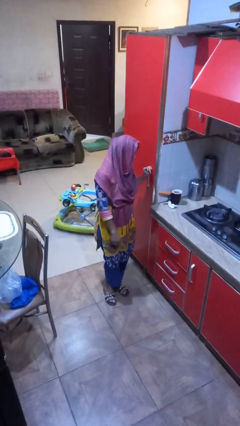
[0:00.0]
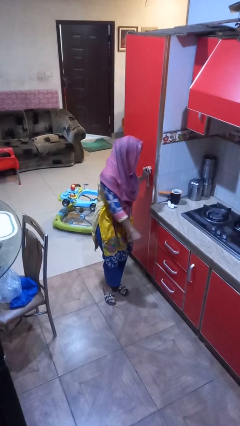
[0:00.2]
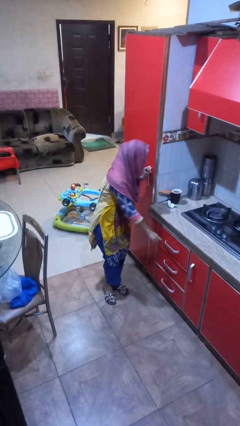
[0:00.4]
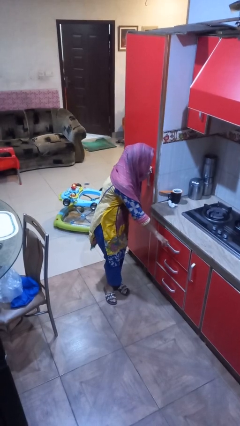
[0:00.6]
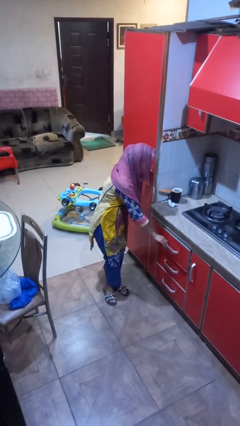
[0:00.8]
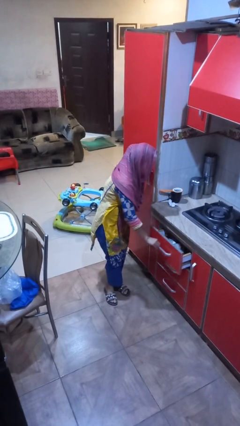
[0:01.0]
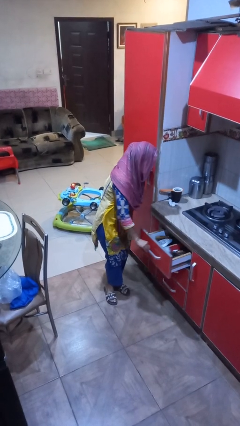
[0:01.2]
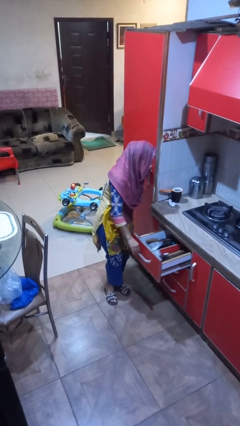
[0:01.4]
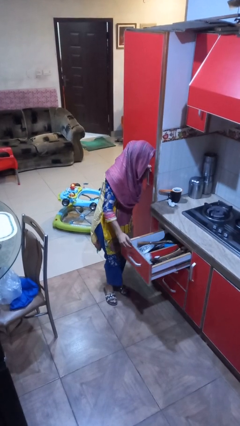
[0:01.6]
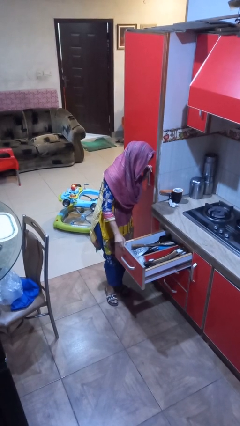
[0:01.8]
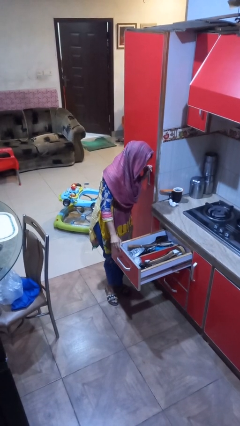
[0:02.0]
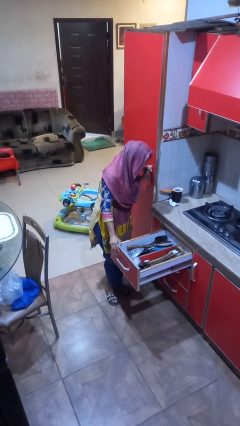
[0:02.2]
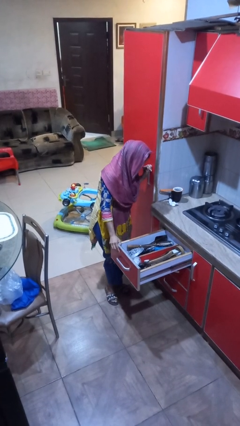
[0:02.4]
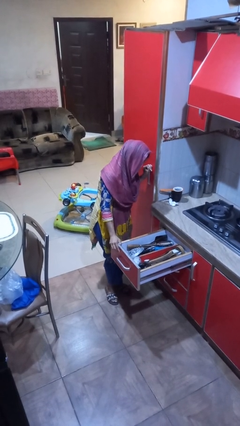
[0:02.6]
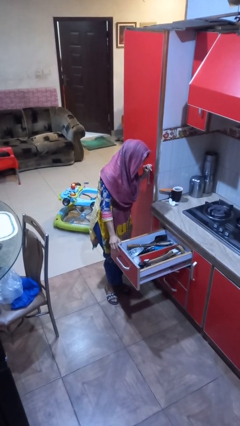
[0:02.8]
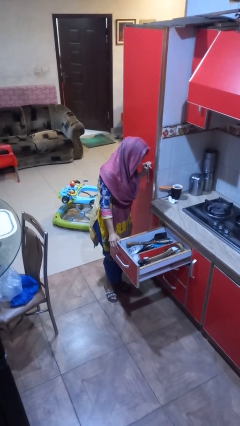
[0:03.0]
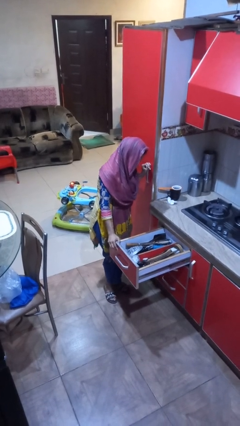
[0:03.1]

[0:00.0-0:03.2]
person opens kitchen drawer

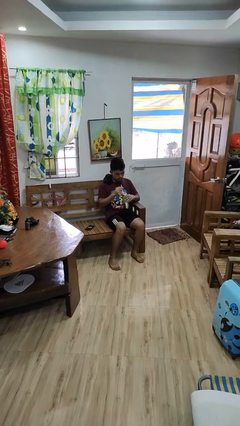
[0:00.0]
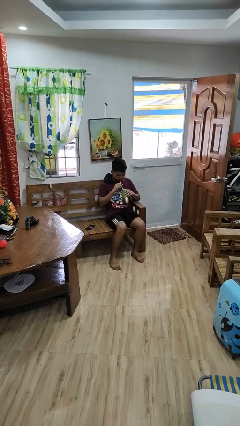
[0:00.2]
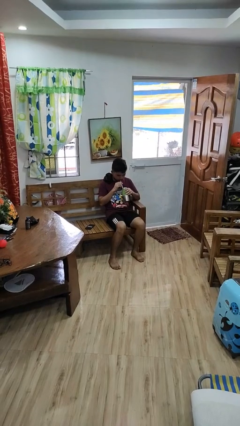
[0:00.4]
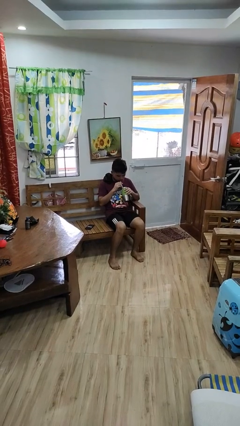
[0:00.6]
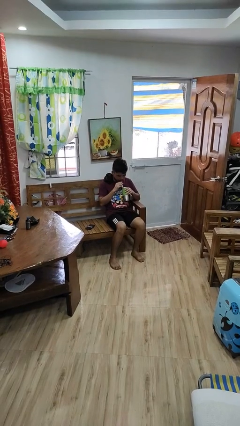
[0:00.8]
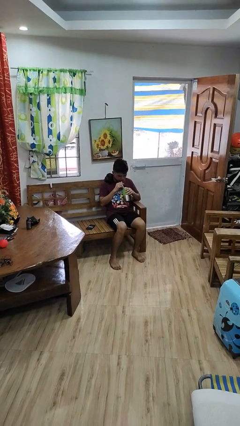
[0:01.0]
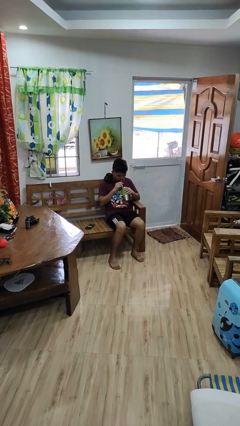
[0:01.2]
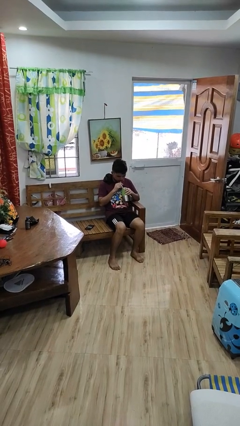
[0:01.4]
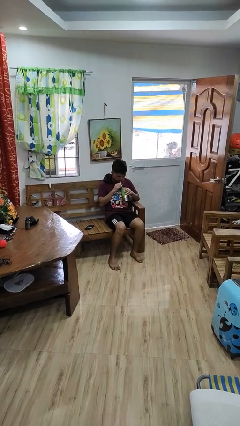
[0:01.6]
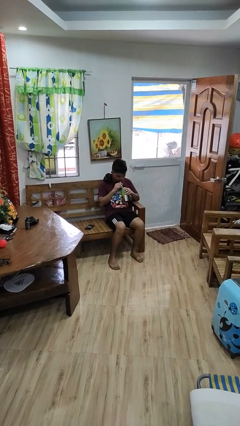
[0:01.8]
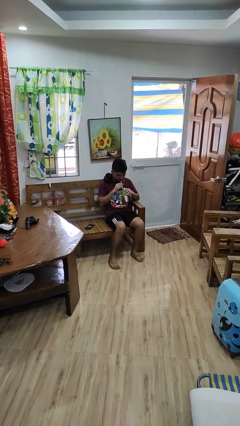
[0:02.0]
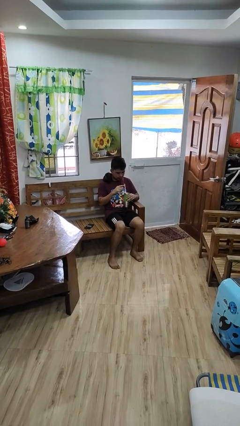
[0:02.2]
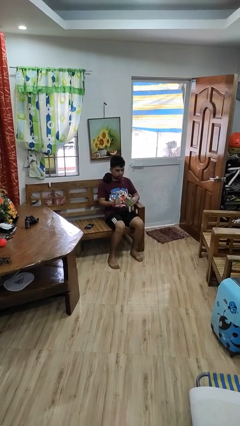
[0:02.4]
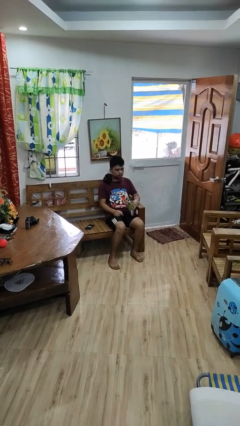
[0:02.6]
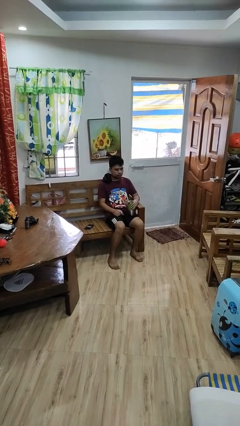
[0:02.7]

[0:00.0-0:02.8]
person drinks from straw

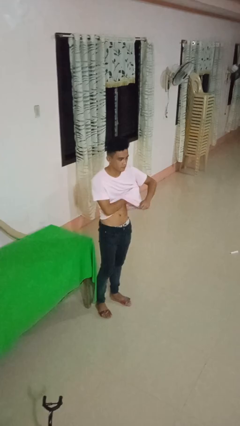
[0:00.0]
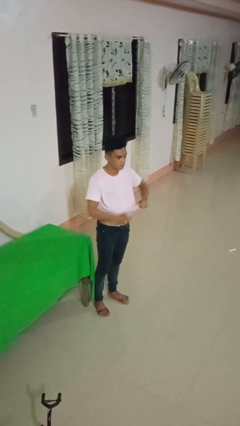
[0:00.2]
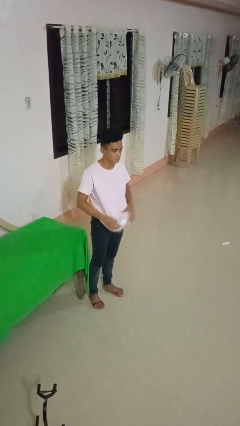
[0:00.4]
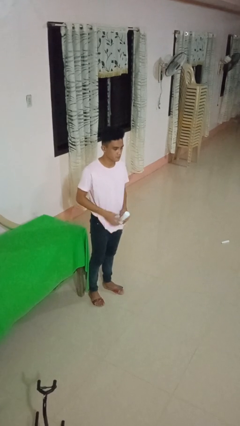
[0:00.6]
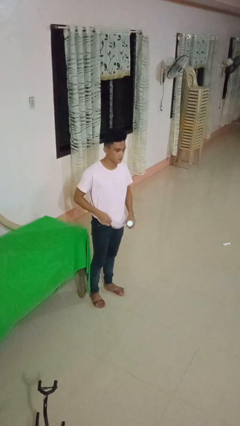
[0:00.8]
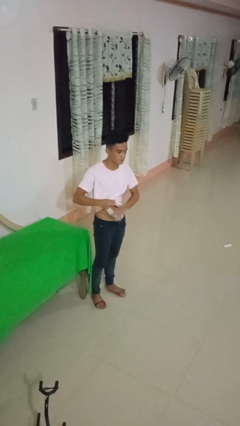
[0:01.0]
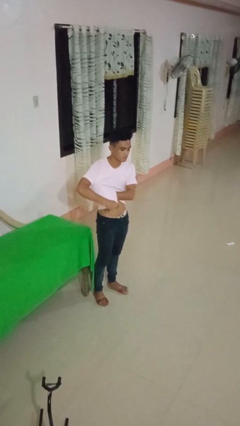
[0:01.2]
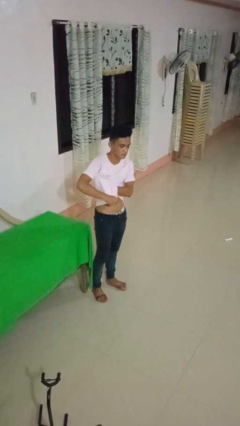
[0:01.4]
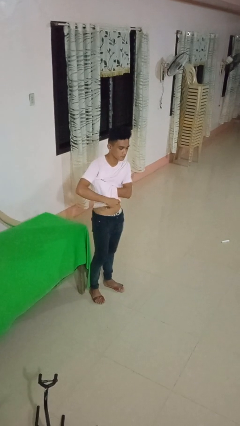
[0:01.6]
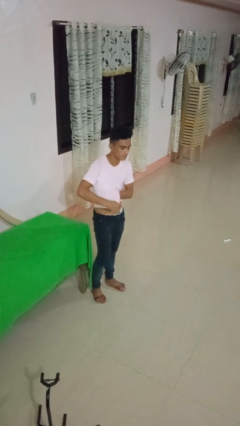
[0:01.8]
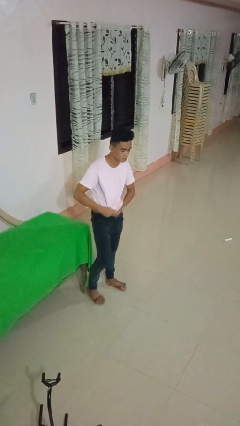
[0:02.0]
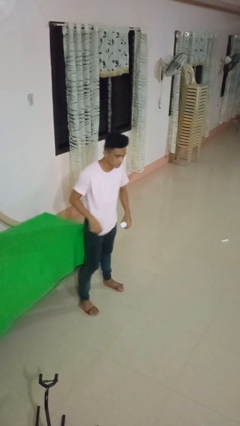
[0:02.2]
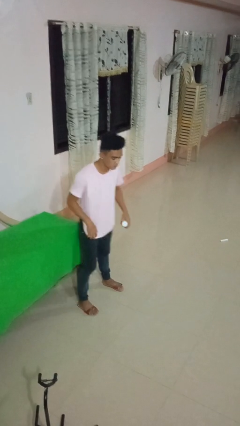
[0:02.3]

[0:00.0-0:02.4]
person applies deodorant

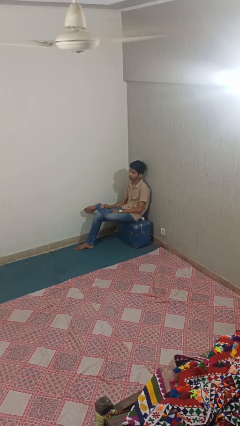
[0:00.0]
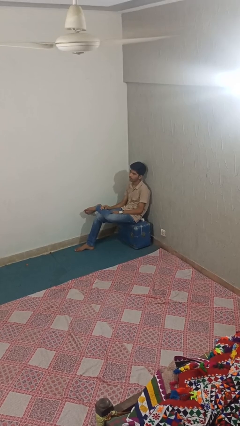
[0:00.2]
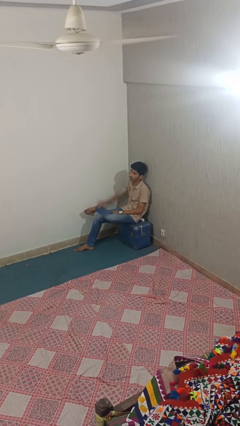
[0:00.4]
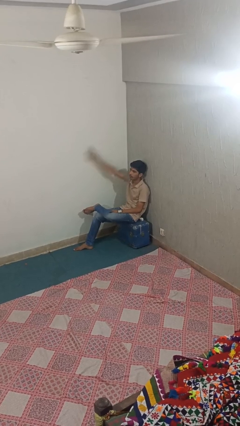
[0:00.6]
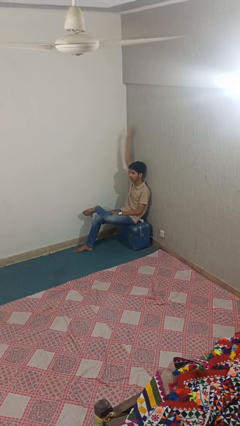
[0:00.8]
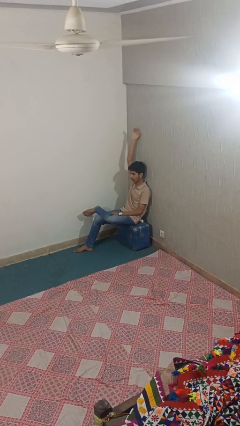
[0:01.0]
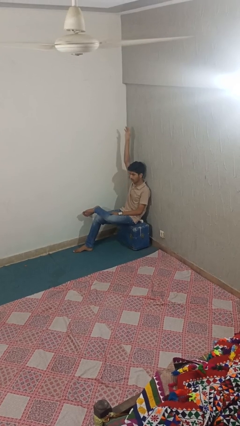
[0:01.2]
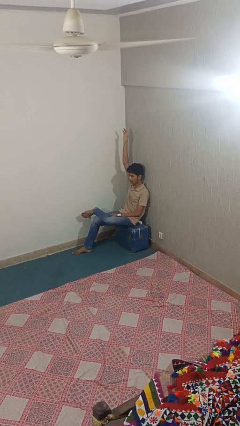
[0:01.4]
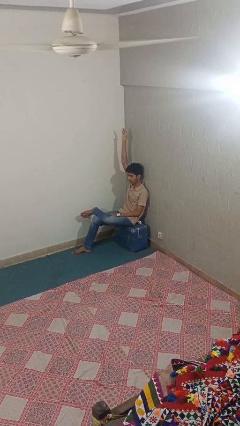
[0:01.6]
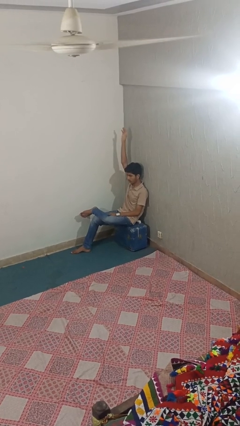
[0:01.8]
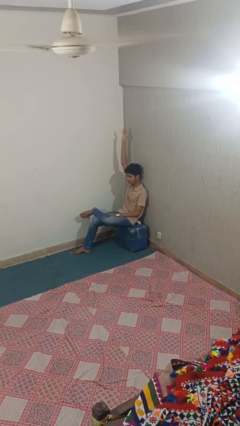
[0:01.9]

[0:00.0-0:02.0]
person gestures raise hand

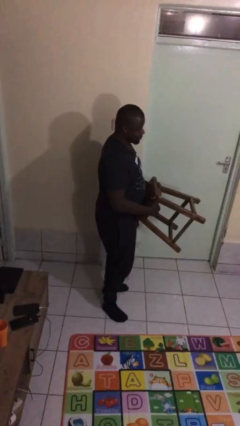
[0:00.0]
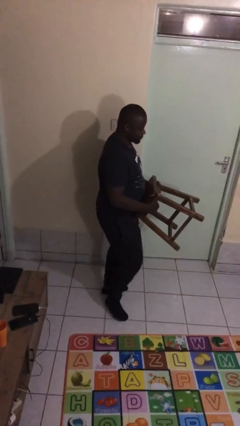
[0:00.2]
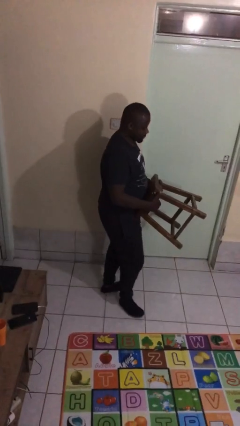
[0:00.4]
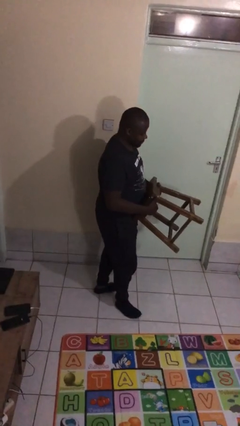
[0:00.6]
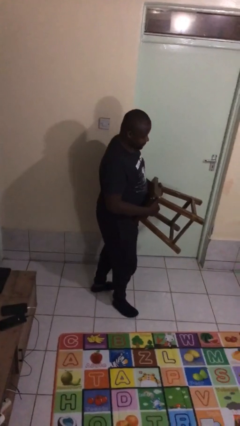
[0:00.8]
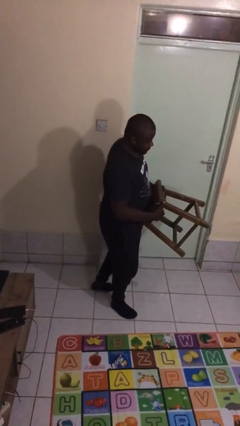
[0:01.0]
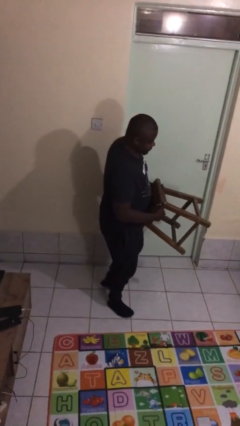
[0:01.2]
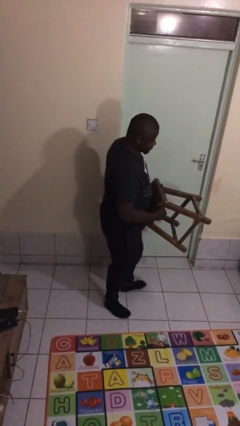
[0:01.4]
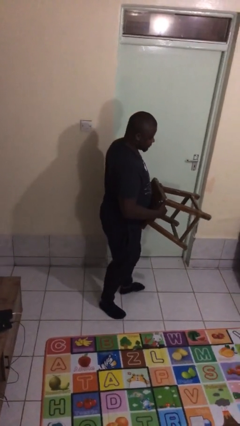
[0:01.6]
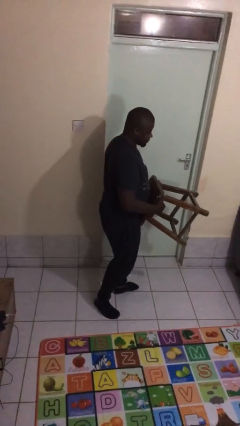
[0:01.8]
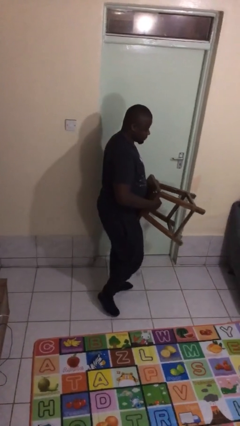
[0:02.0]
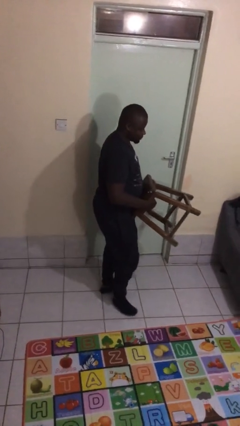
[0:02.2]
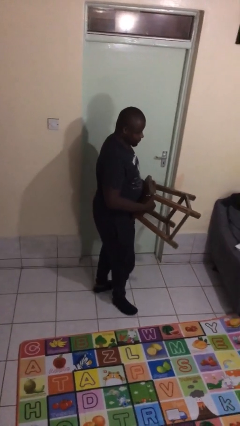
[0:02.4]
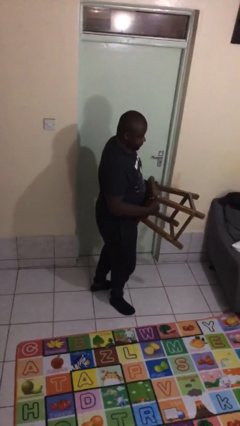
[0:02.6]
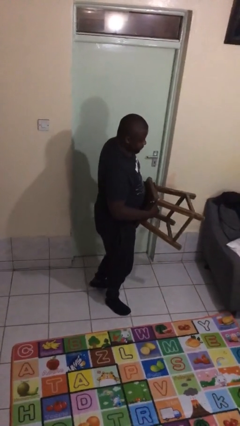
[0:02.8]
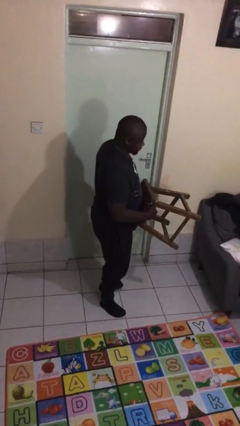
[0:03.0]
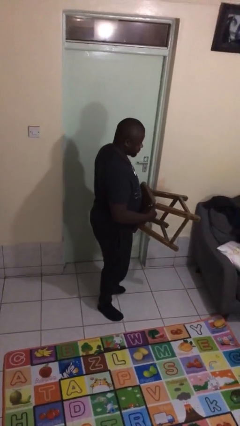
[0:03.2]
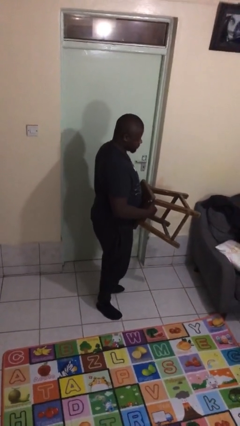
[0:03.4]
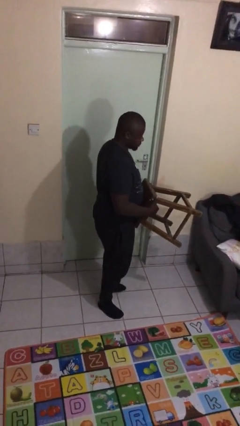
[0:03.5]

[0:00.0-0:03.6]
person carries furniture

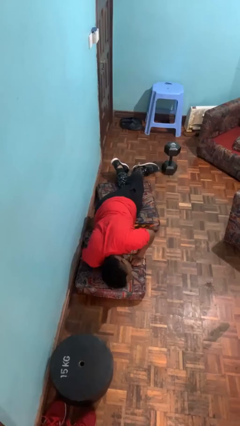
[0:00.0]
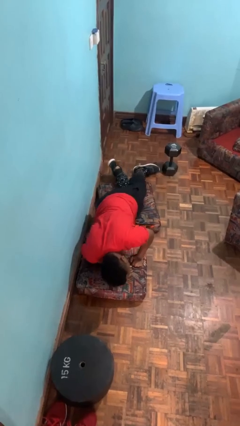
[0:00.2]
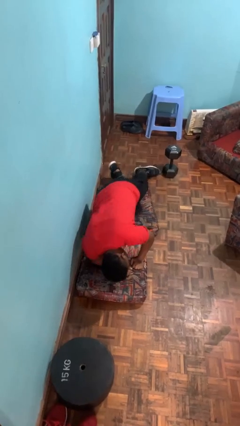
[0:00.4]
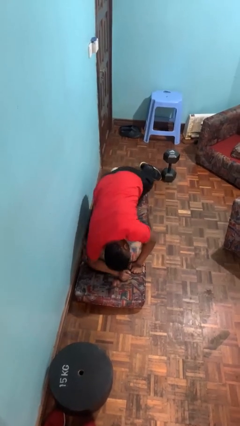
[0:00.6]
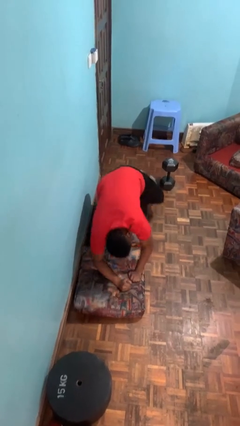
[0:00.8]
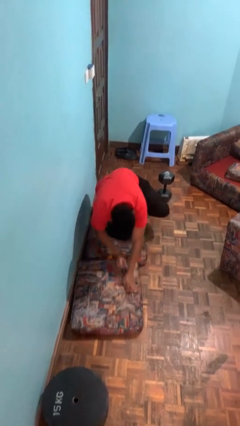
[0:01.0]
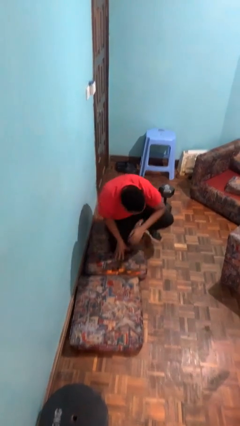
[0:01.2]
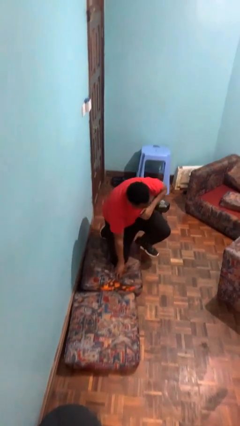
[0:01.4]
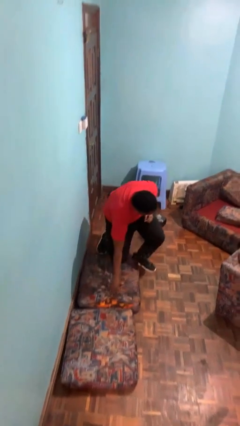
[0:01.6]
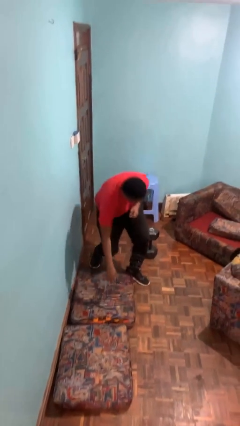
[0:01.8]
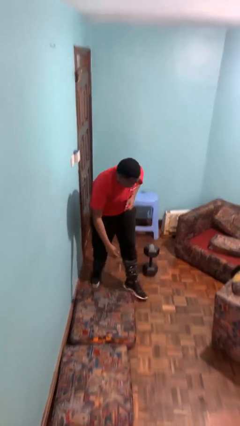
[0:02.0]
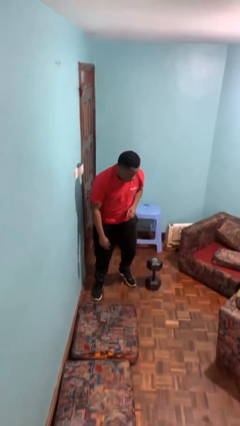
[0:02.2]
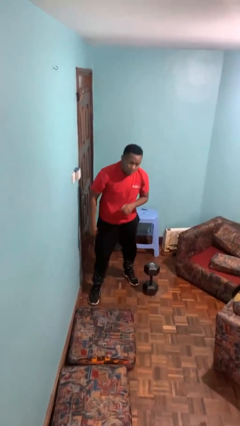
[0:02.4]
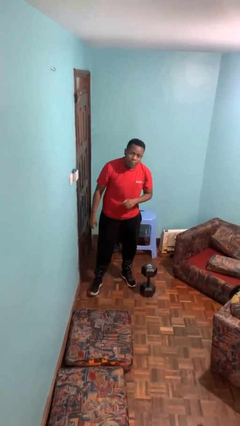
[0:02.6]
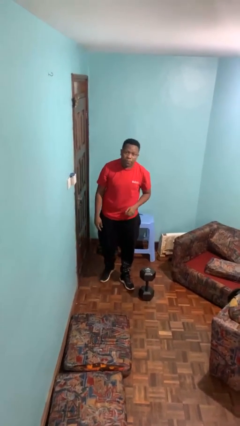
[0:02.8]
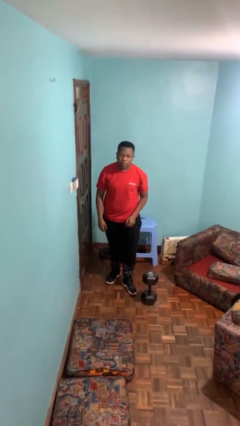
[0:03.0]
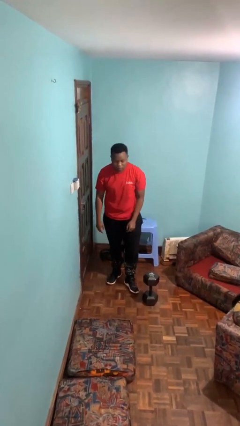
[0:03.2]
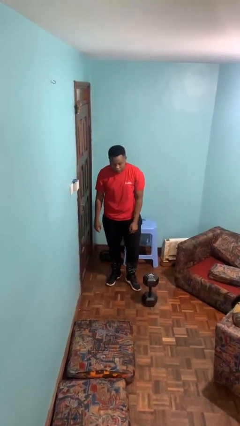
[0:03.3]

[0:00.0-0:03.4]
person stands up from floor

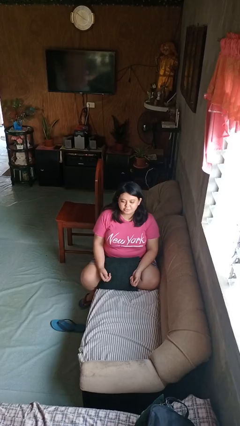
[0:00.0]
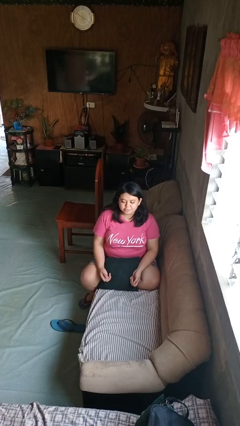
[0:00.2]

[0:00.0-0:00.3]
person shrugs
